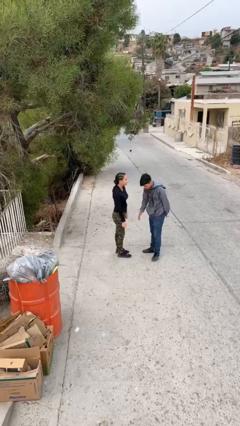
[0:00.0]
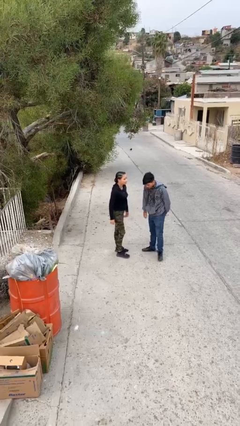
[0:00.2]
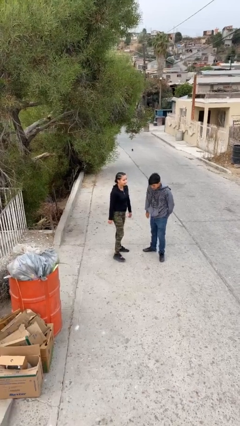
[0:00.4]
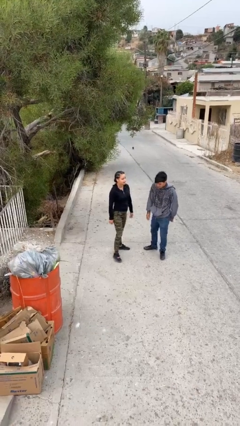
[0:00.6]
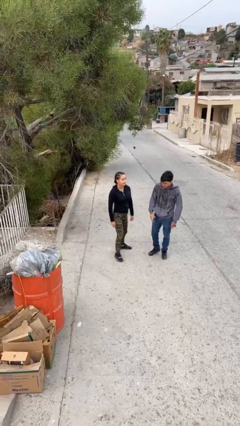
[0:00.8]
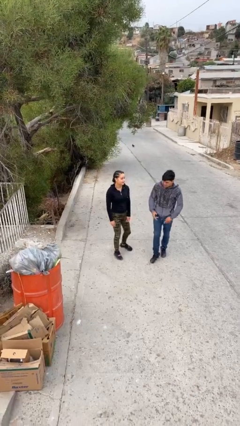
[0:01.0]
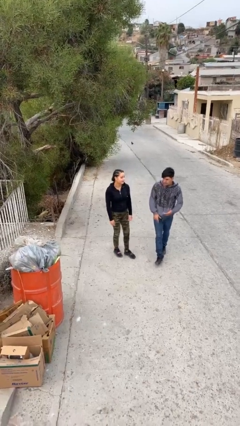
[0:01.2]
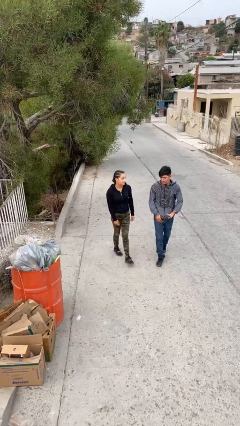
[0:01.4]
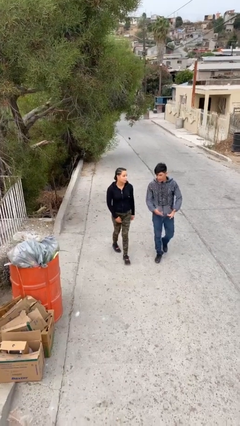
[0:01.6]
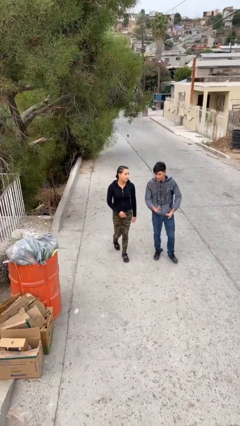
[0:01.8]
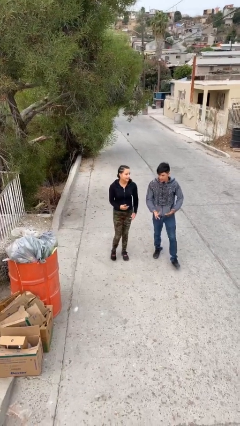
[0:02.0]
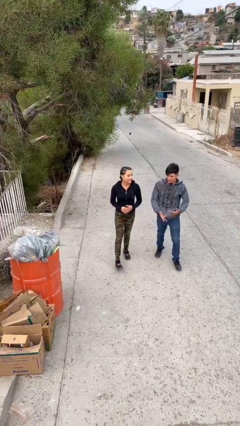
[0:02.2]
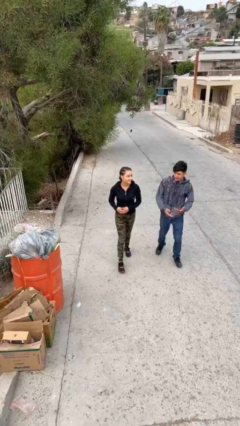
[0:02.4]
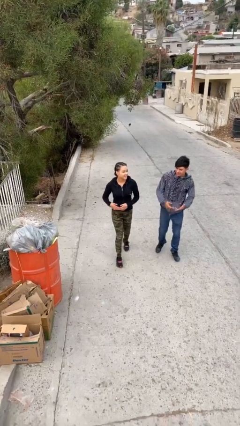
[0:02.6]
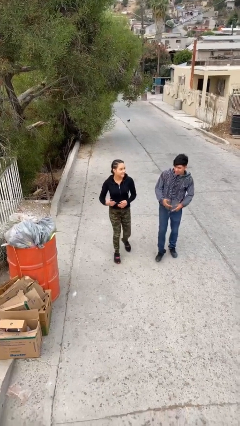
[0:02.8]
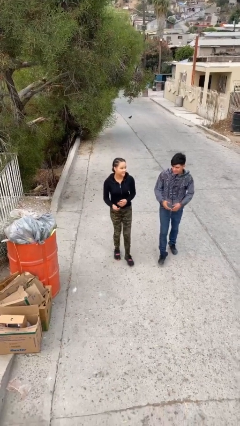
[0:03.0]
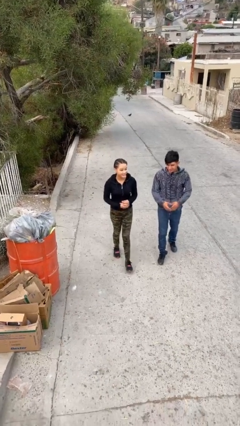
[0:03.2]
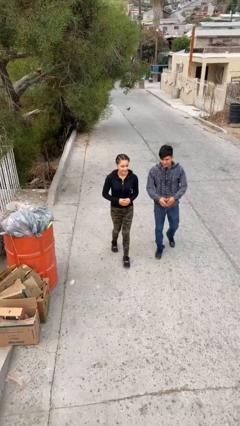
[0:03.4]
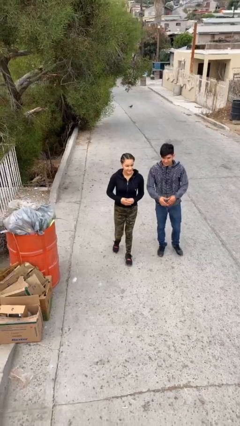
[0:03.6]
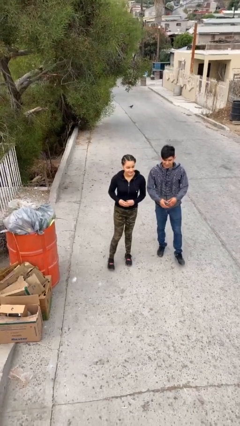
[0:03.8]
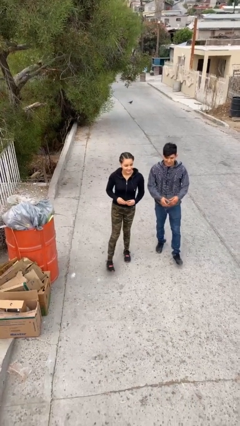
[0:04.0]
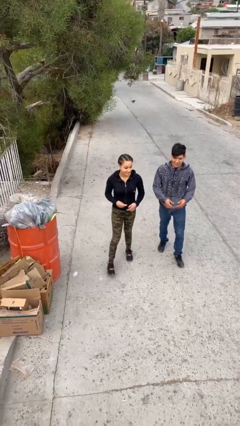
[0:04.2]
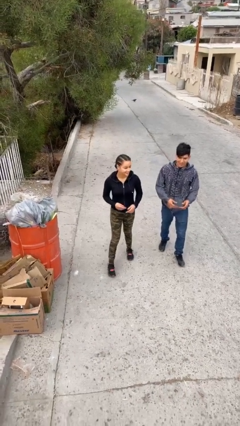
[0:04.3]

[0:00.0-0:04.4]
person talks to person

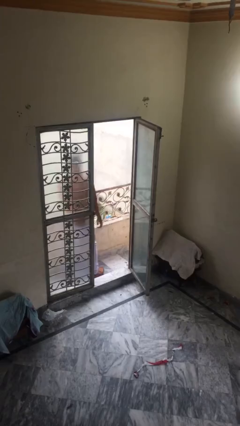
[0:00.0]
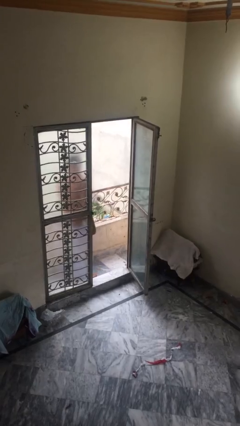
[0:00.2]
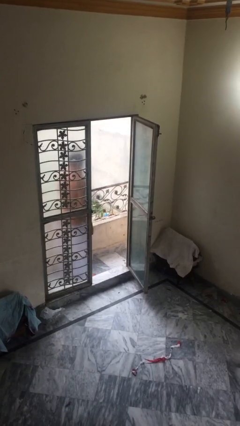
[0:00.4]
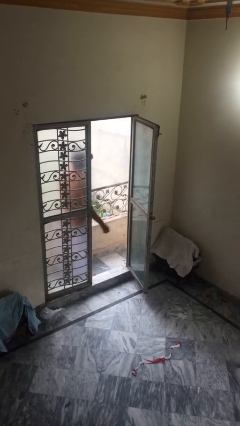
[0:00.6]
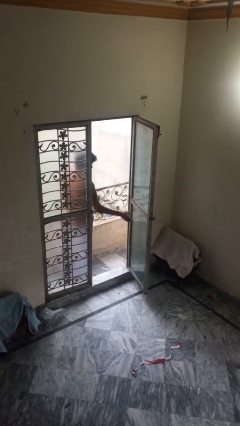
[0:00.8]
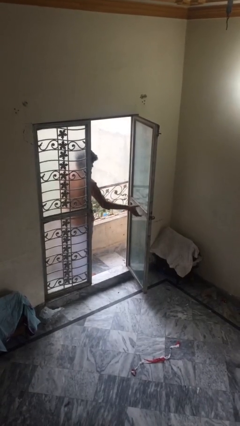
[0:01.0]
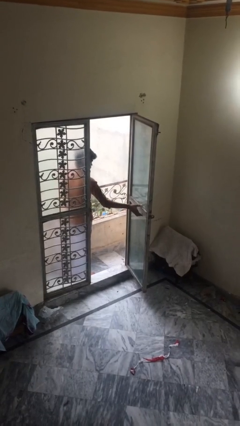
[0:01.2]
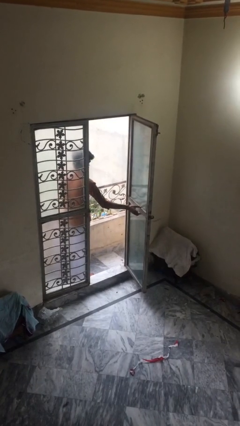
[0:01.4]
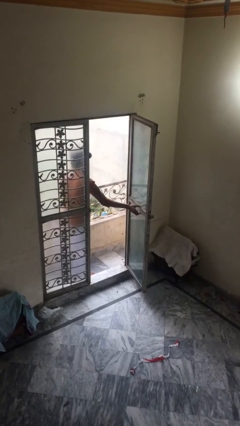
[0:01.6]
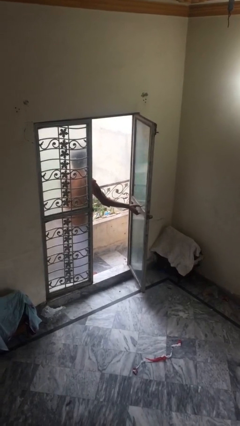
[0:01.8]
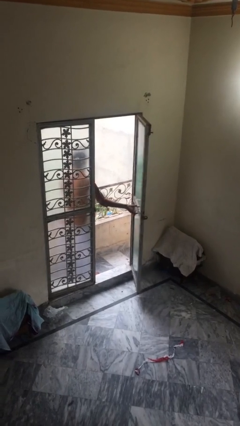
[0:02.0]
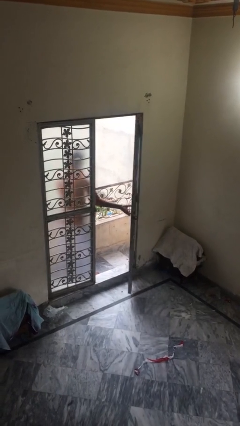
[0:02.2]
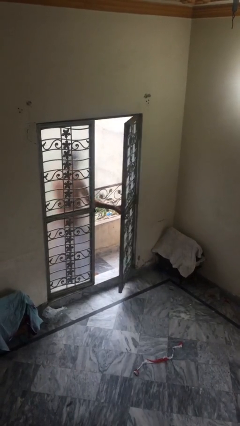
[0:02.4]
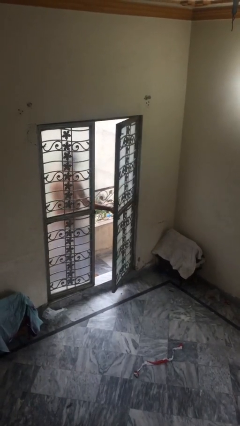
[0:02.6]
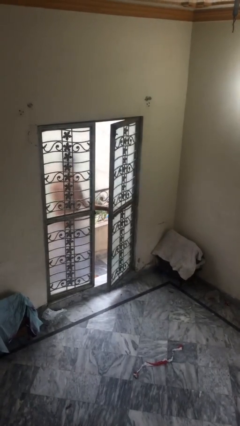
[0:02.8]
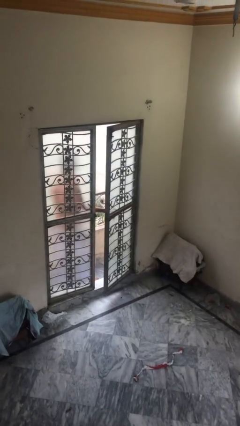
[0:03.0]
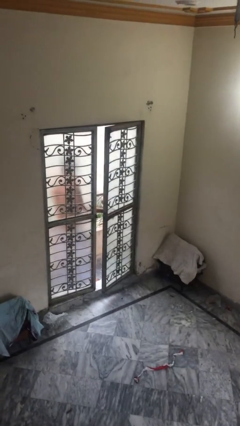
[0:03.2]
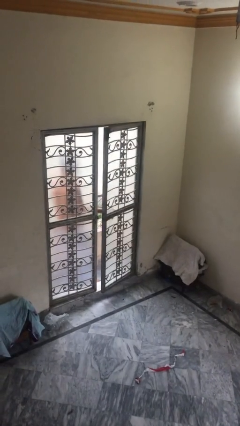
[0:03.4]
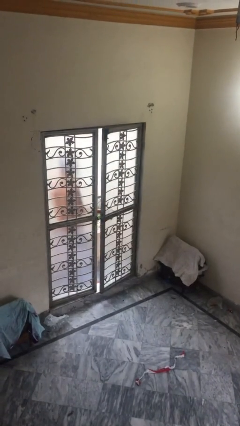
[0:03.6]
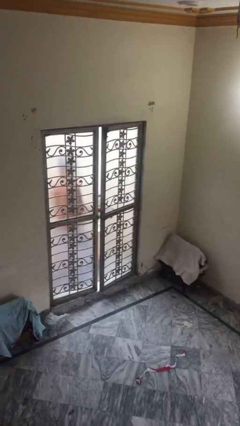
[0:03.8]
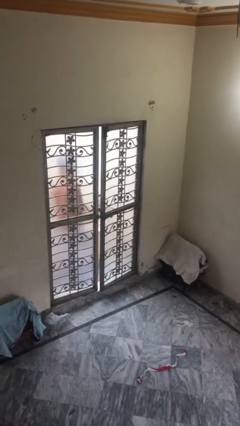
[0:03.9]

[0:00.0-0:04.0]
person closes facility door

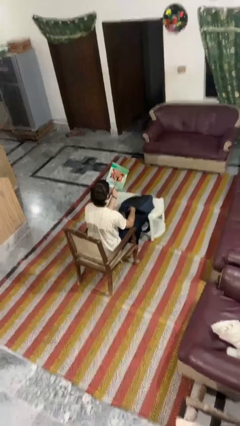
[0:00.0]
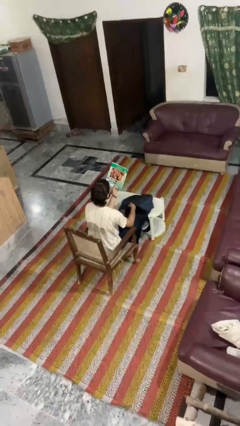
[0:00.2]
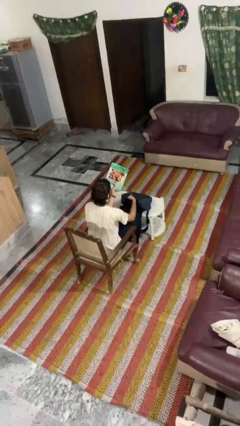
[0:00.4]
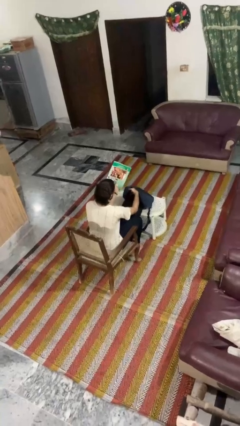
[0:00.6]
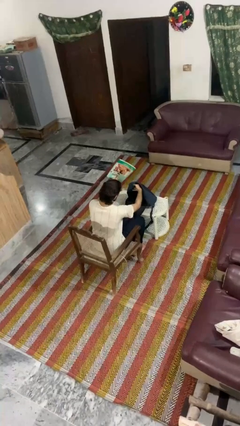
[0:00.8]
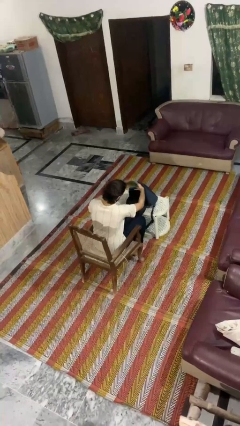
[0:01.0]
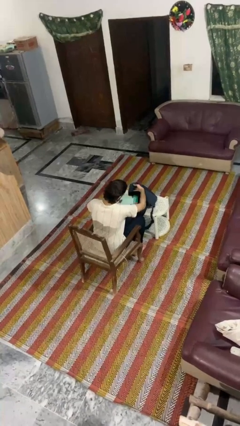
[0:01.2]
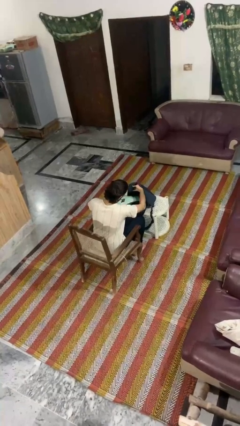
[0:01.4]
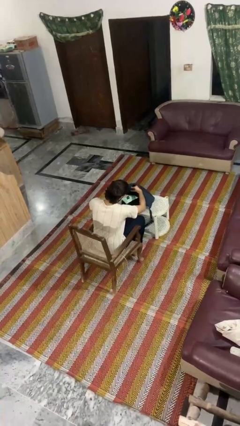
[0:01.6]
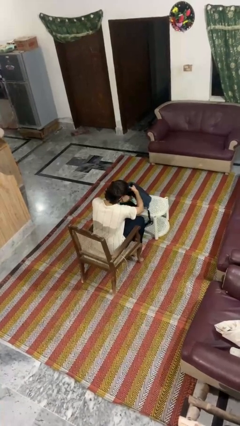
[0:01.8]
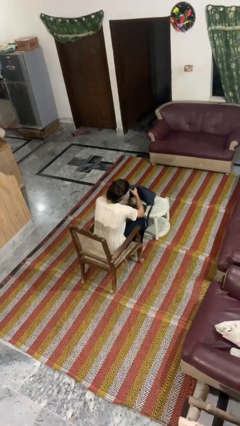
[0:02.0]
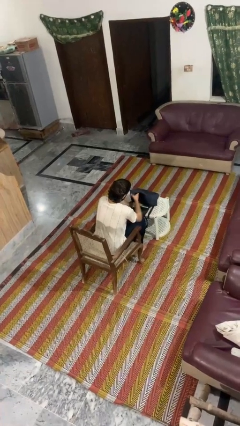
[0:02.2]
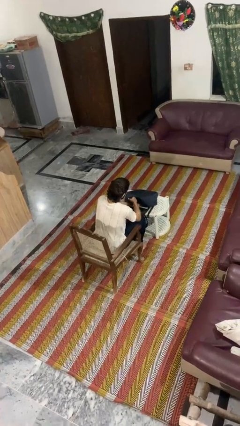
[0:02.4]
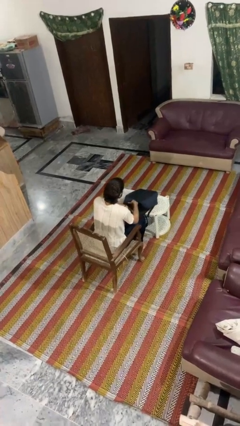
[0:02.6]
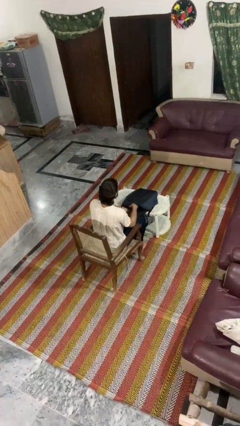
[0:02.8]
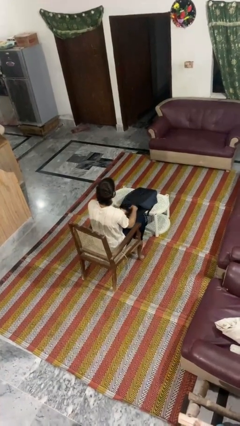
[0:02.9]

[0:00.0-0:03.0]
person puts object into backpack

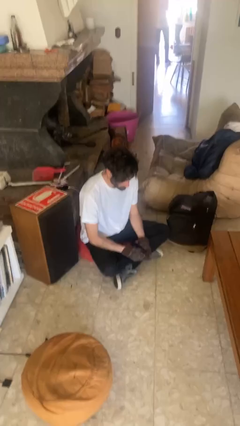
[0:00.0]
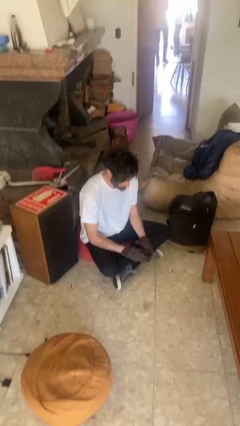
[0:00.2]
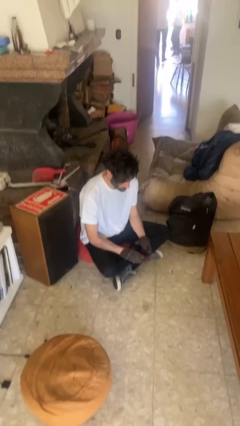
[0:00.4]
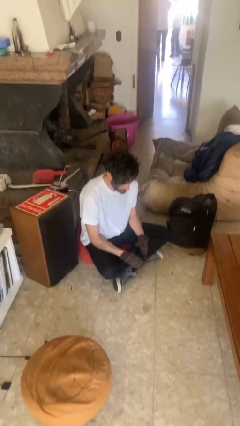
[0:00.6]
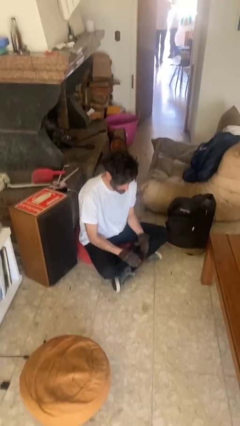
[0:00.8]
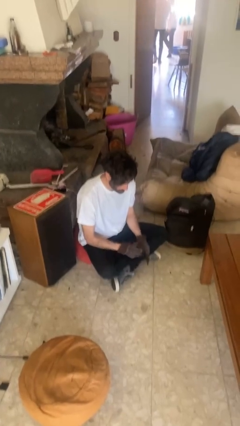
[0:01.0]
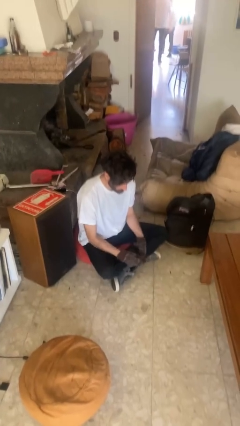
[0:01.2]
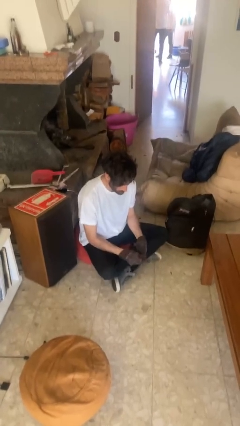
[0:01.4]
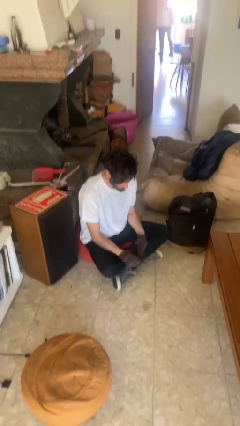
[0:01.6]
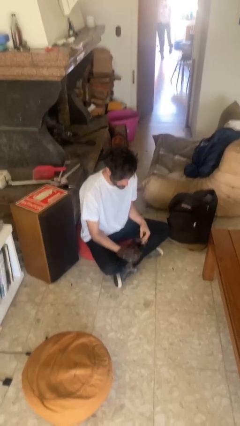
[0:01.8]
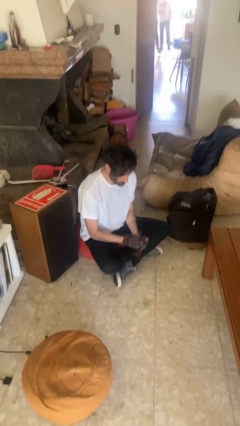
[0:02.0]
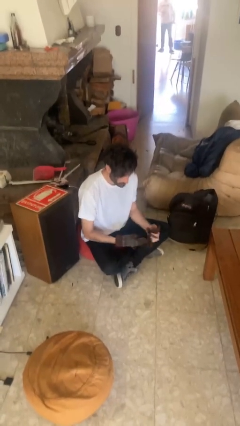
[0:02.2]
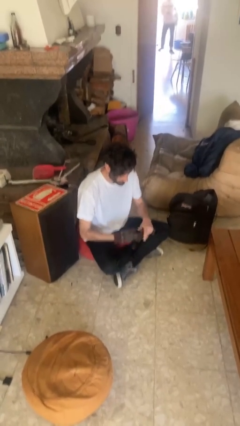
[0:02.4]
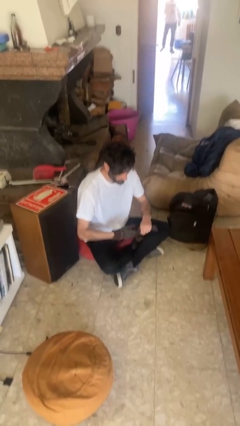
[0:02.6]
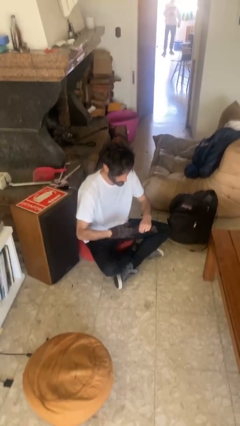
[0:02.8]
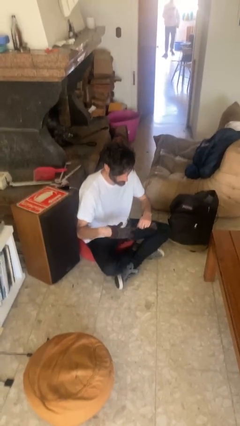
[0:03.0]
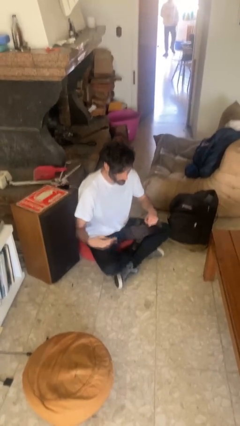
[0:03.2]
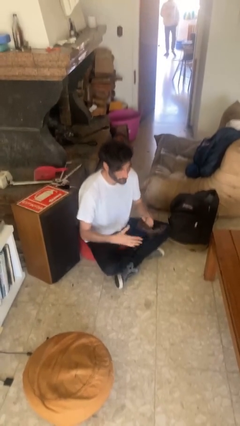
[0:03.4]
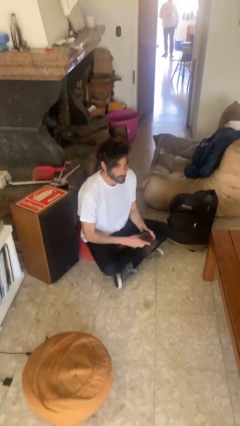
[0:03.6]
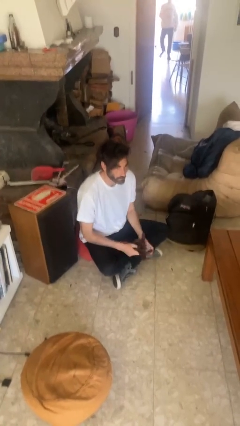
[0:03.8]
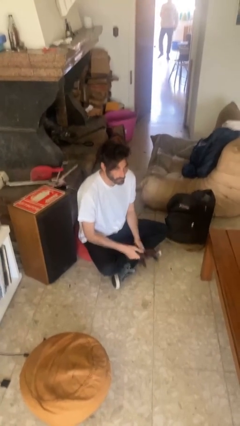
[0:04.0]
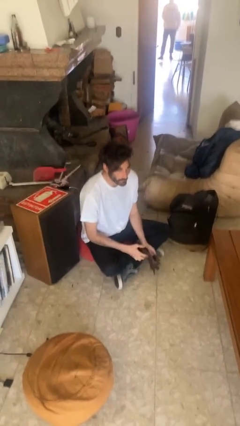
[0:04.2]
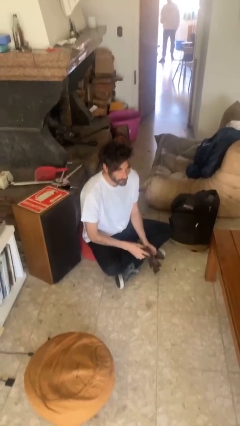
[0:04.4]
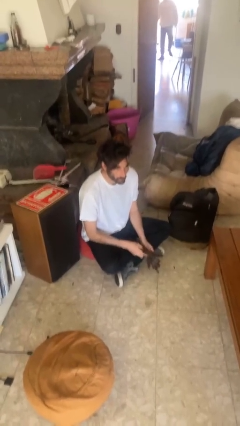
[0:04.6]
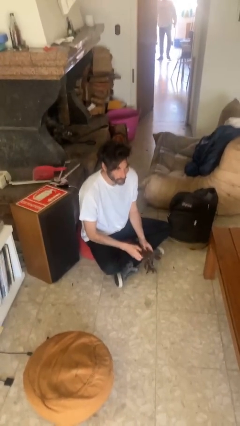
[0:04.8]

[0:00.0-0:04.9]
person takes off gloves

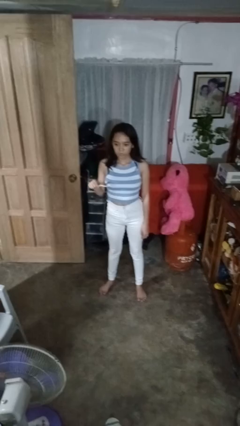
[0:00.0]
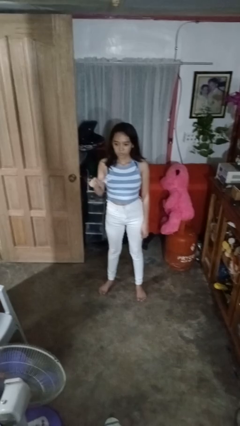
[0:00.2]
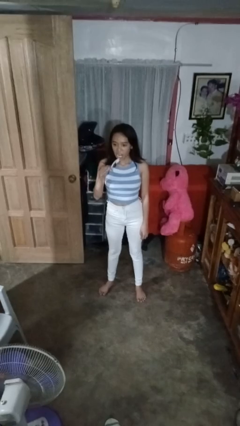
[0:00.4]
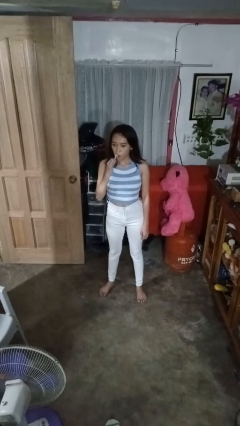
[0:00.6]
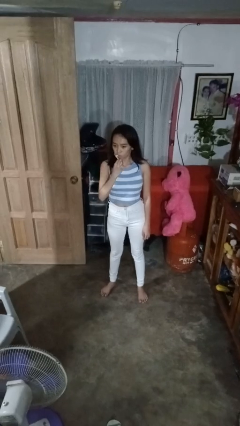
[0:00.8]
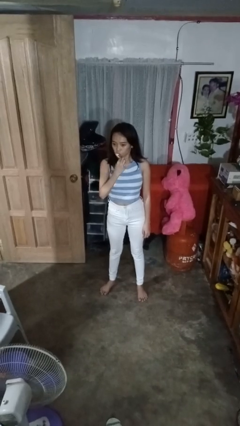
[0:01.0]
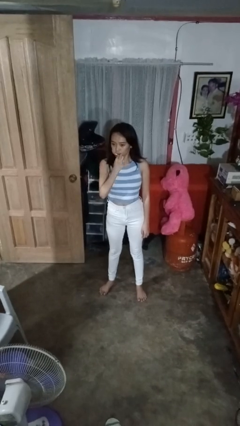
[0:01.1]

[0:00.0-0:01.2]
person brushes teeth
